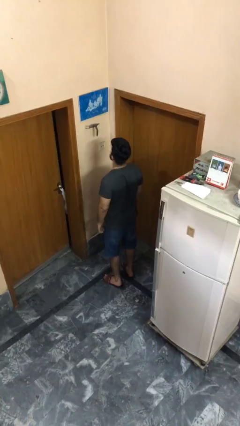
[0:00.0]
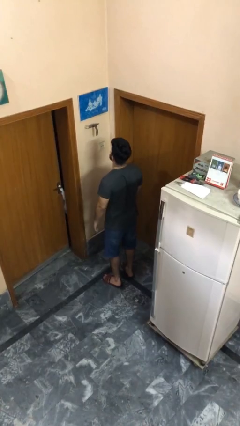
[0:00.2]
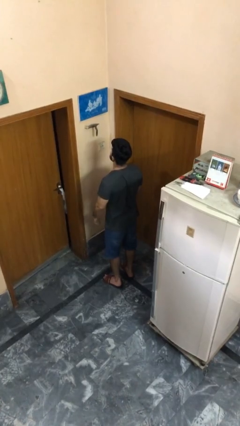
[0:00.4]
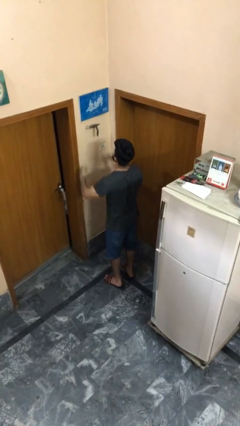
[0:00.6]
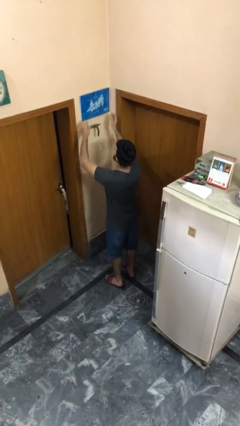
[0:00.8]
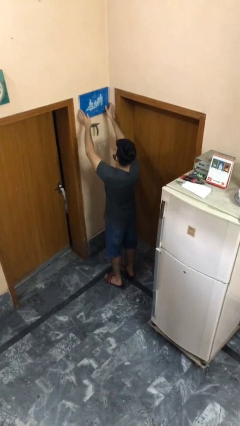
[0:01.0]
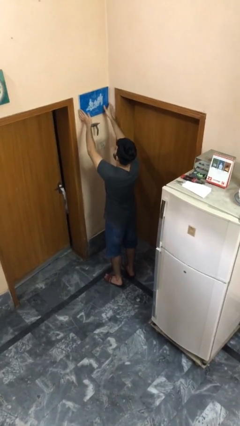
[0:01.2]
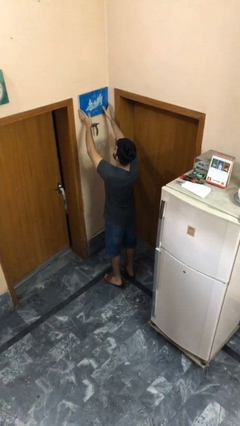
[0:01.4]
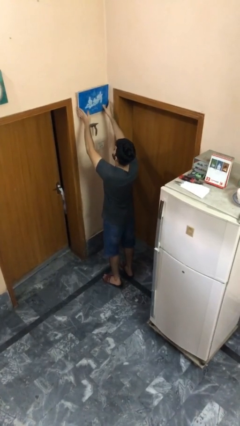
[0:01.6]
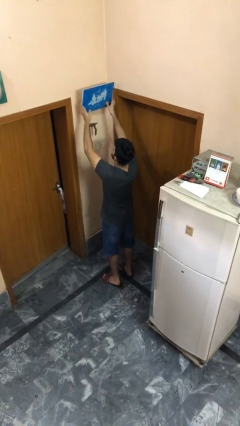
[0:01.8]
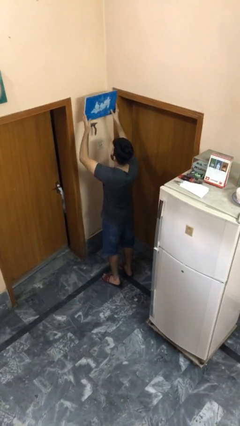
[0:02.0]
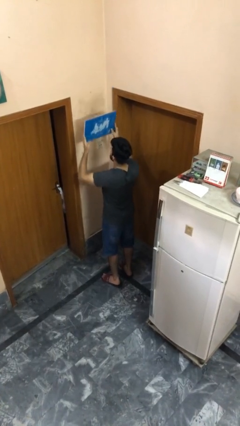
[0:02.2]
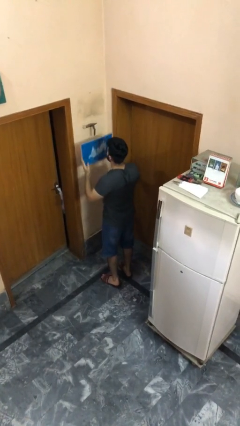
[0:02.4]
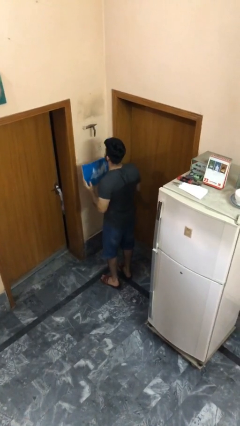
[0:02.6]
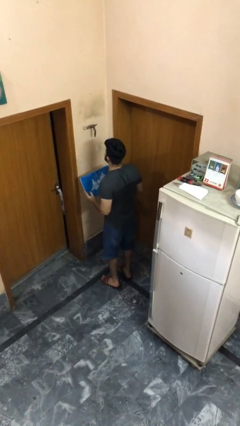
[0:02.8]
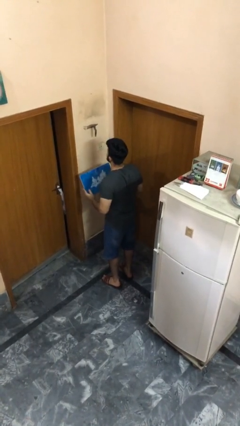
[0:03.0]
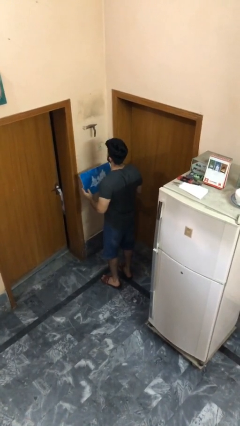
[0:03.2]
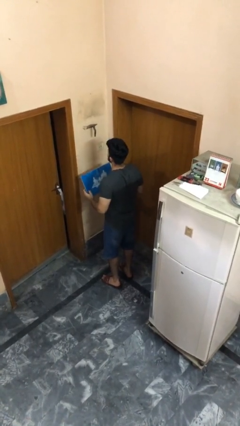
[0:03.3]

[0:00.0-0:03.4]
person takes down picture frame

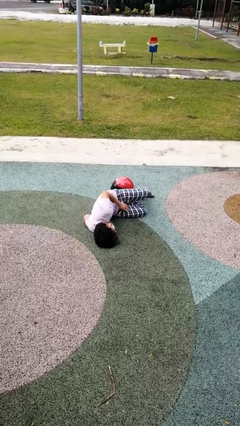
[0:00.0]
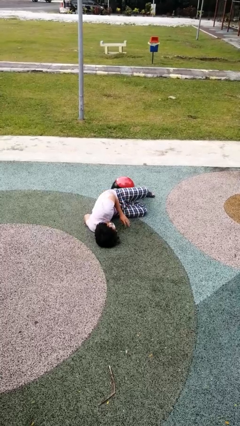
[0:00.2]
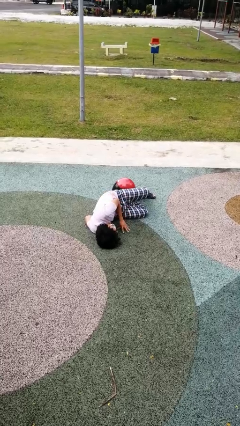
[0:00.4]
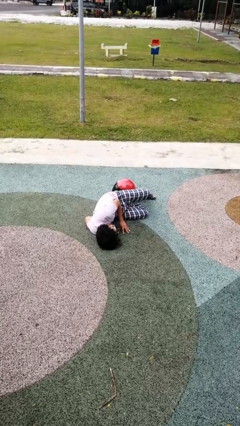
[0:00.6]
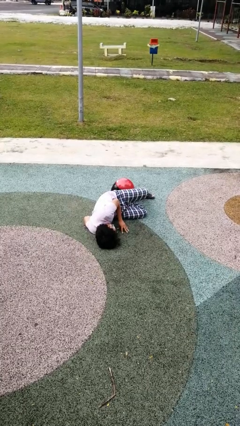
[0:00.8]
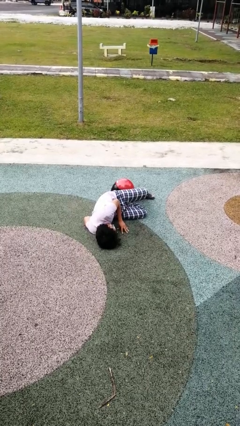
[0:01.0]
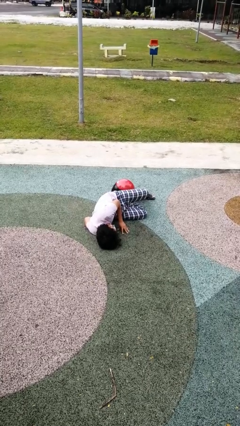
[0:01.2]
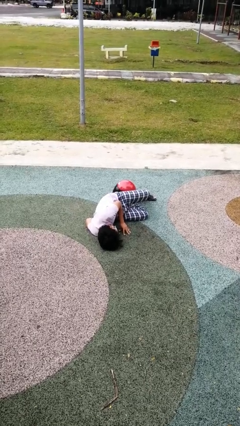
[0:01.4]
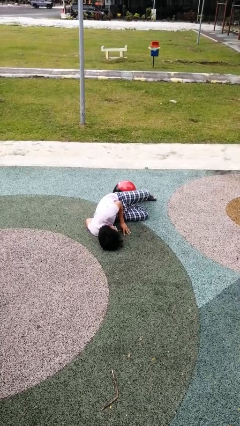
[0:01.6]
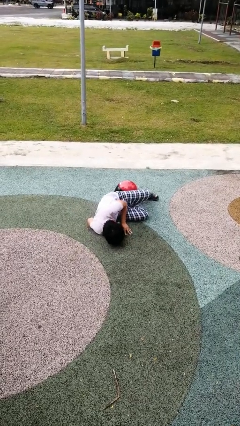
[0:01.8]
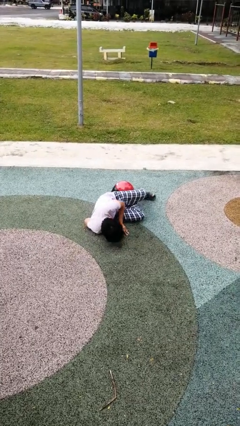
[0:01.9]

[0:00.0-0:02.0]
person lies down on floor

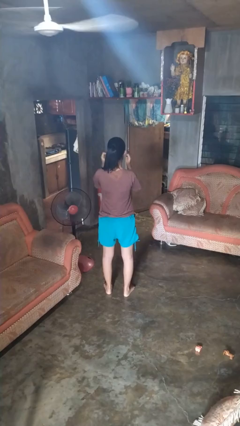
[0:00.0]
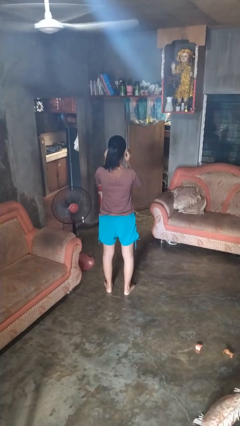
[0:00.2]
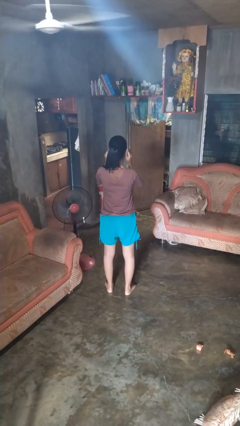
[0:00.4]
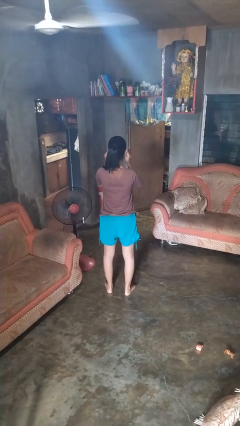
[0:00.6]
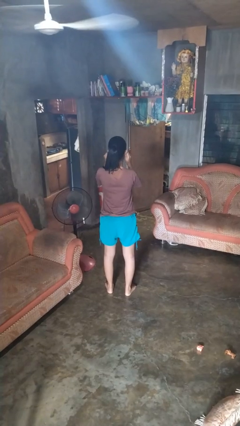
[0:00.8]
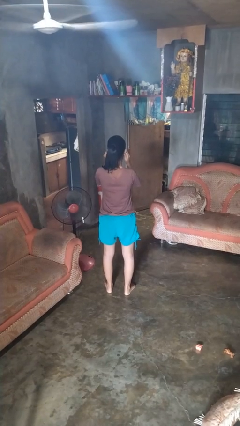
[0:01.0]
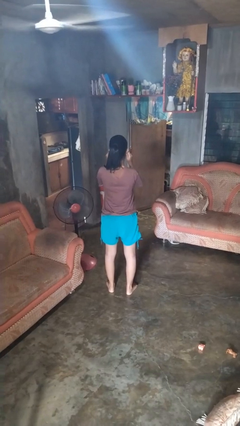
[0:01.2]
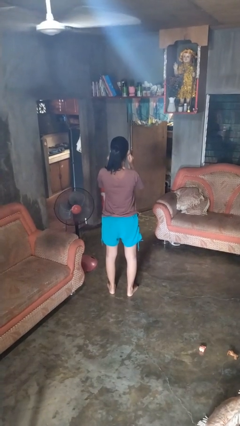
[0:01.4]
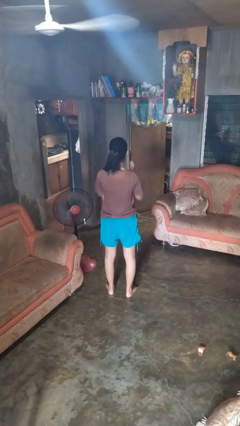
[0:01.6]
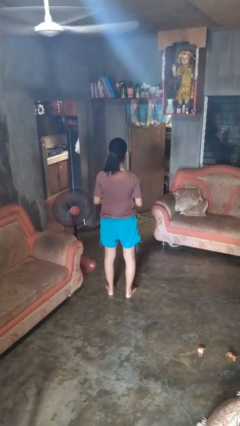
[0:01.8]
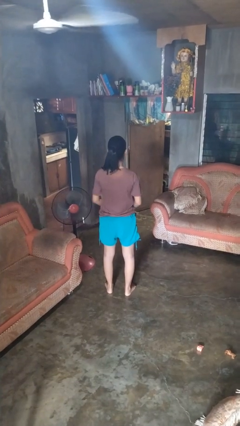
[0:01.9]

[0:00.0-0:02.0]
person touches earlobe

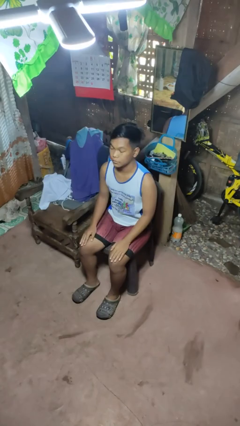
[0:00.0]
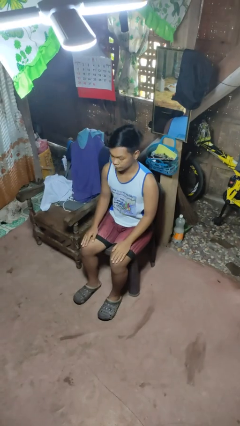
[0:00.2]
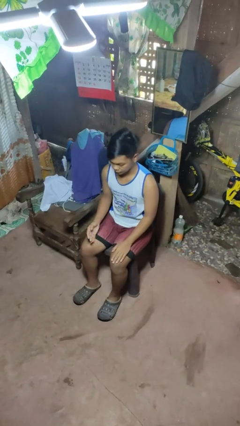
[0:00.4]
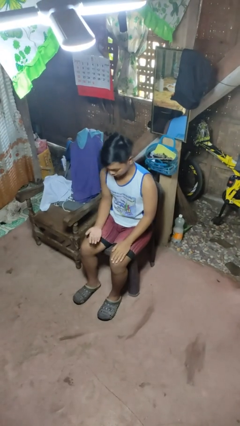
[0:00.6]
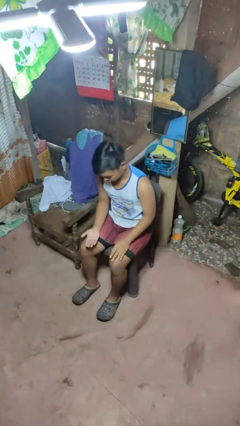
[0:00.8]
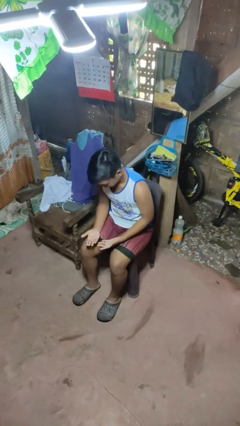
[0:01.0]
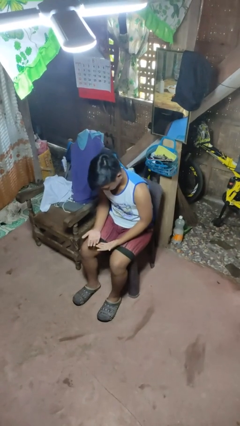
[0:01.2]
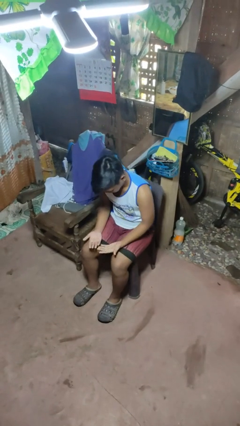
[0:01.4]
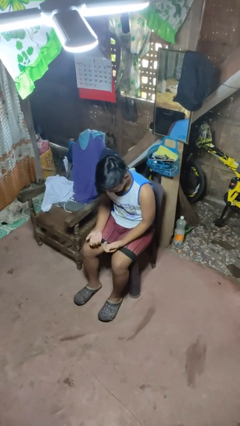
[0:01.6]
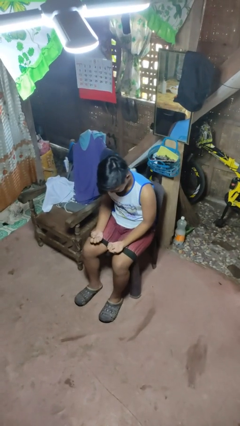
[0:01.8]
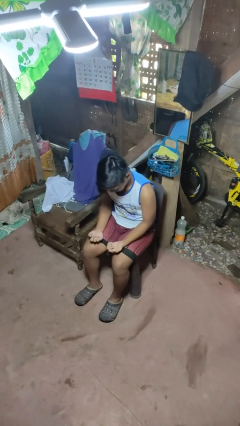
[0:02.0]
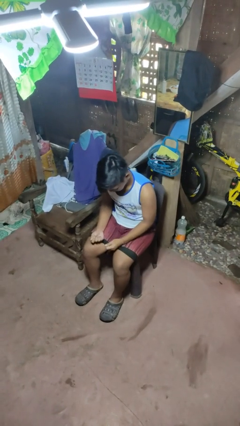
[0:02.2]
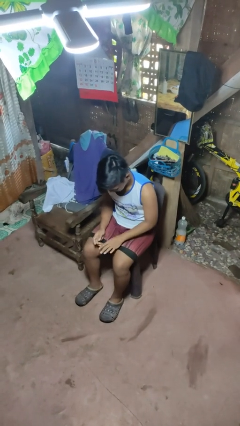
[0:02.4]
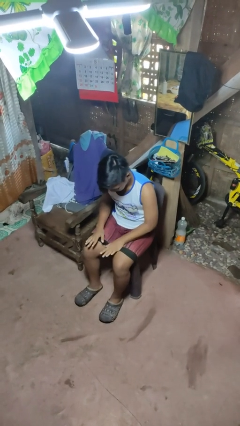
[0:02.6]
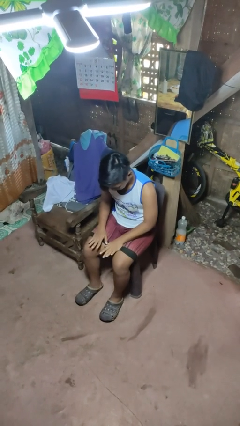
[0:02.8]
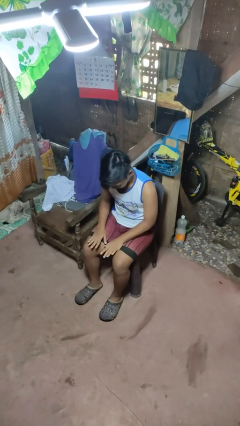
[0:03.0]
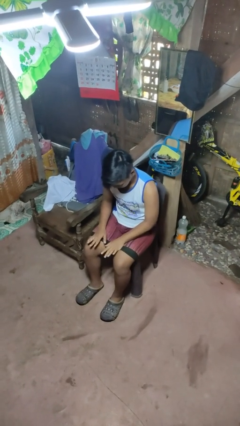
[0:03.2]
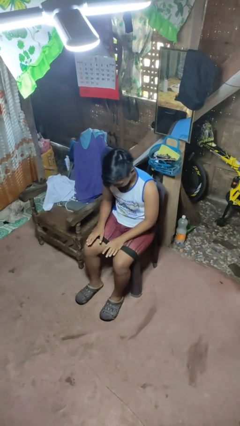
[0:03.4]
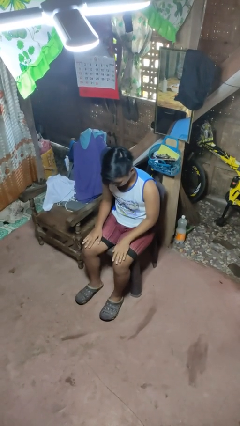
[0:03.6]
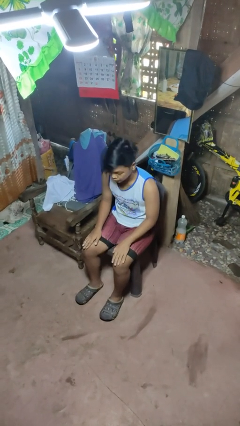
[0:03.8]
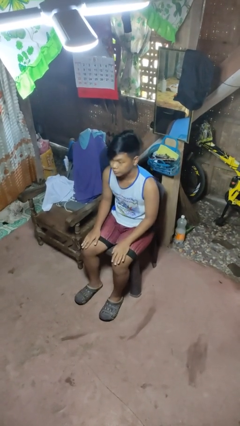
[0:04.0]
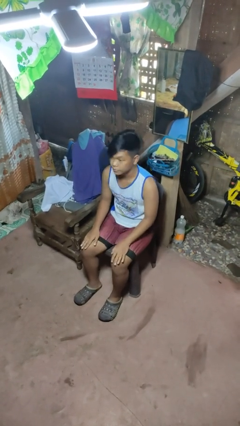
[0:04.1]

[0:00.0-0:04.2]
person looks at hands in lap

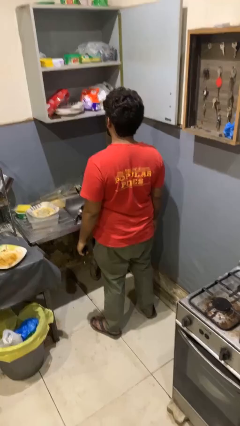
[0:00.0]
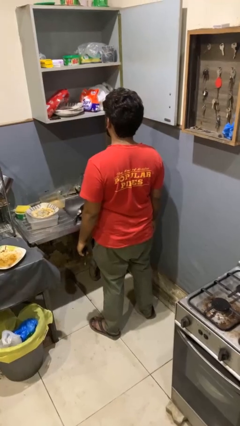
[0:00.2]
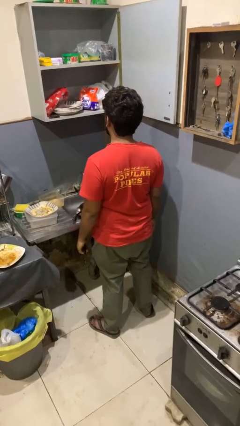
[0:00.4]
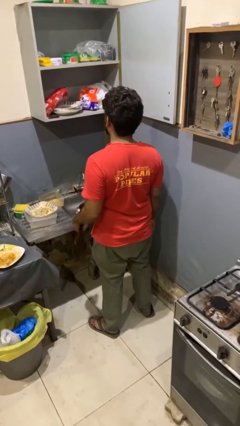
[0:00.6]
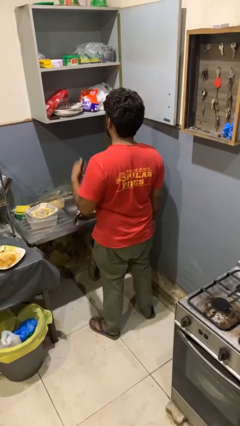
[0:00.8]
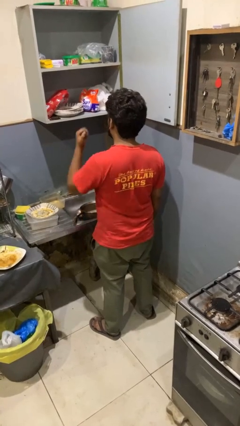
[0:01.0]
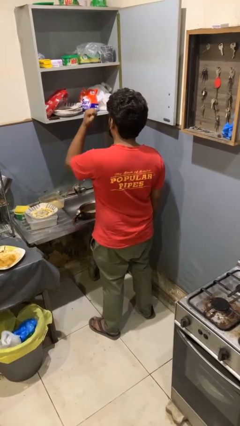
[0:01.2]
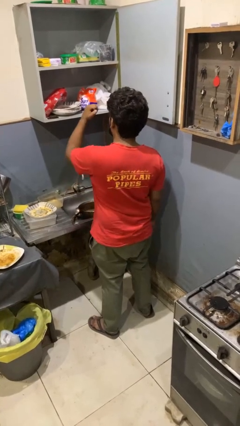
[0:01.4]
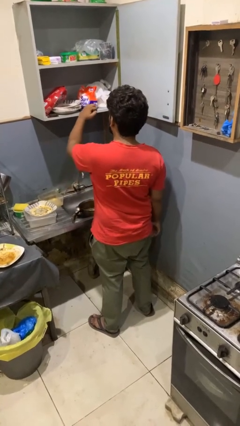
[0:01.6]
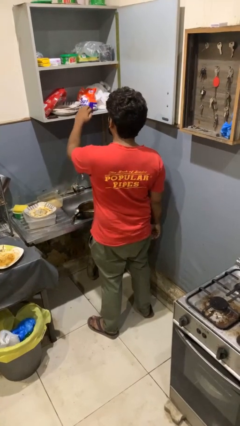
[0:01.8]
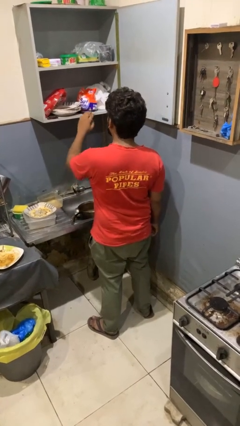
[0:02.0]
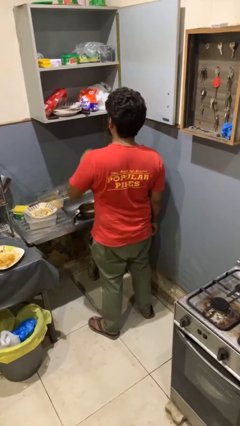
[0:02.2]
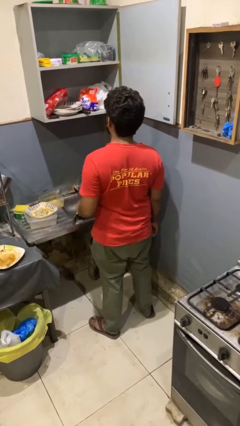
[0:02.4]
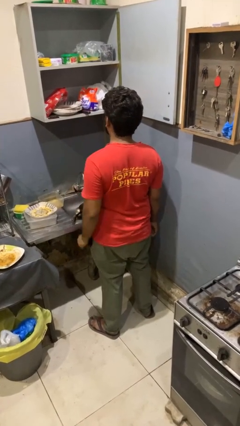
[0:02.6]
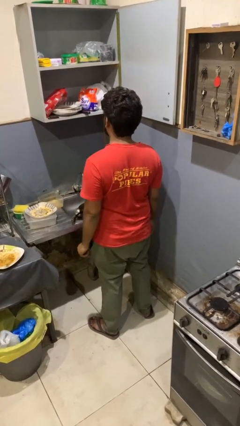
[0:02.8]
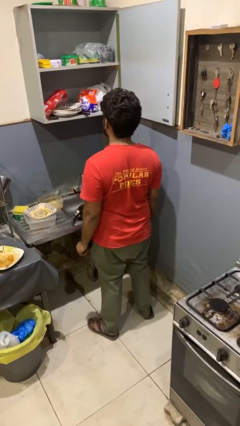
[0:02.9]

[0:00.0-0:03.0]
person puts object in cabinet

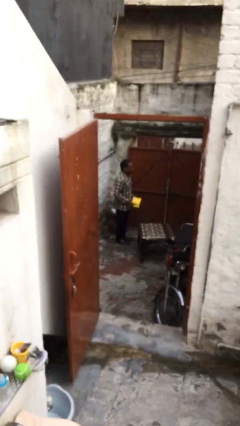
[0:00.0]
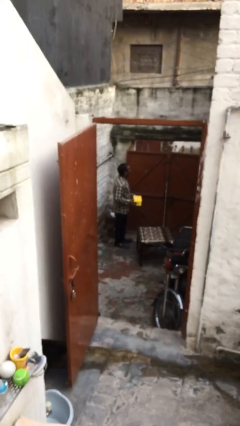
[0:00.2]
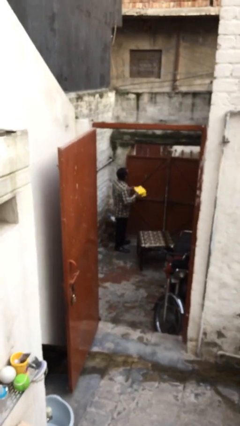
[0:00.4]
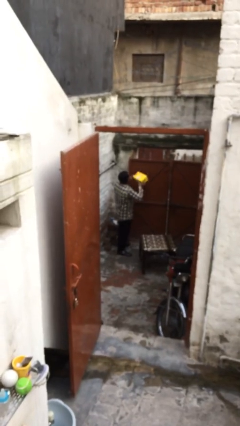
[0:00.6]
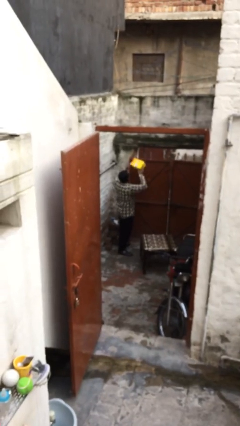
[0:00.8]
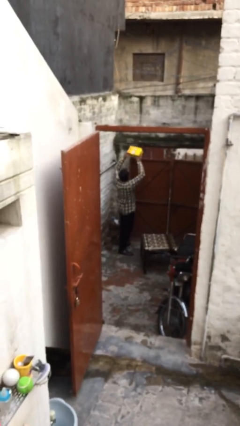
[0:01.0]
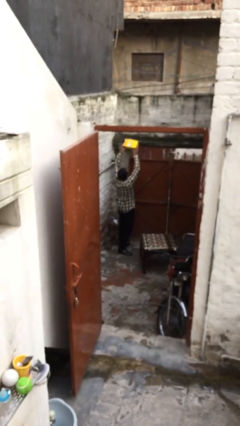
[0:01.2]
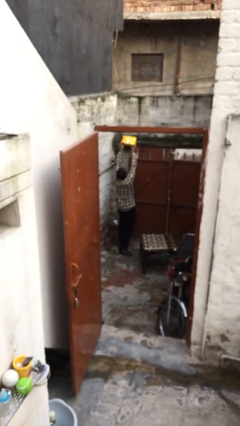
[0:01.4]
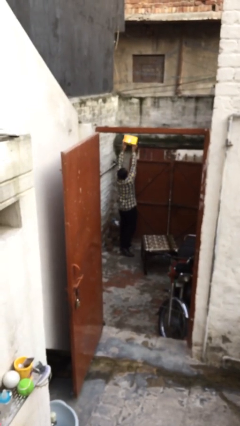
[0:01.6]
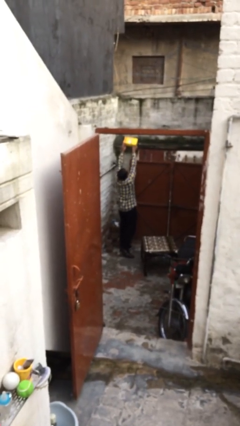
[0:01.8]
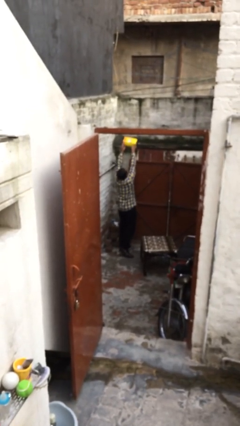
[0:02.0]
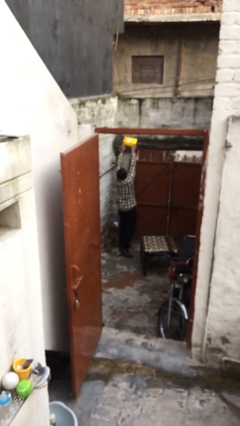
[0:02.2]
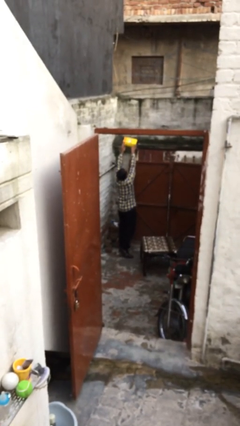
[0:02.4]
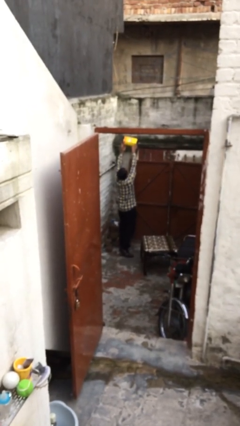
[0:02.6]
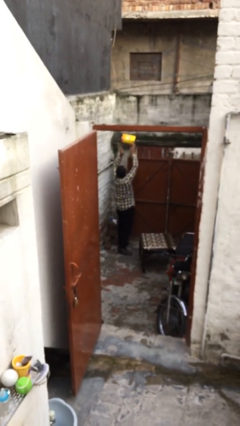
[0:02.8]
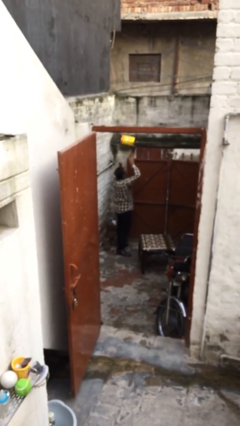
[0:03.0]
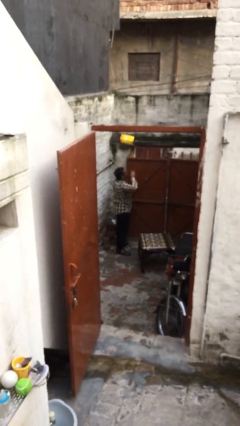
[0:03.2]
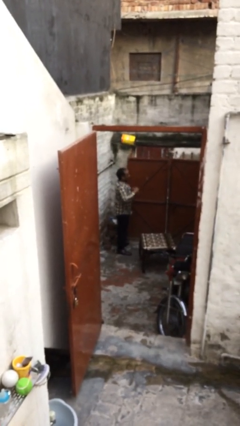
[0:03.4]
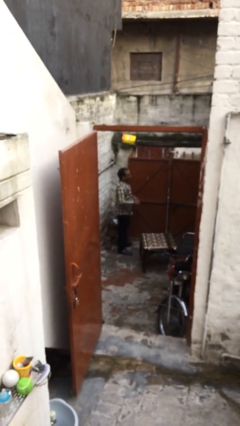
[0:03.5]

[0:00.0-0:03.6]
person puts down object on shelf
